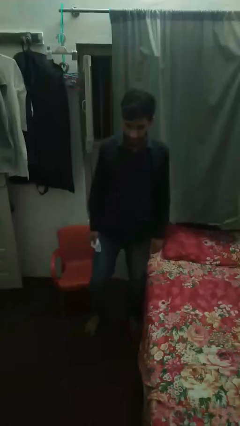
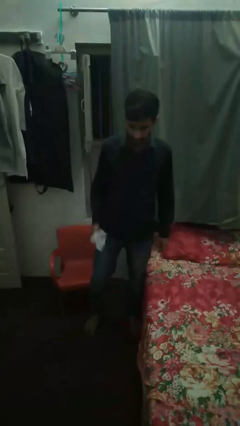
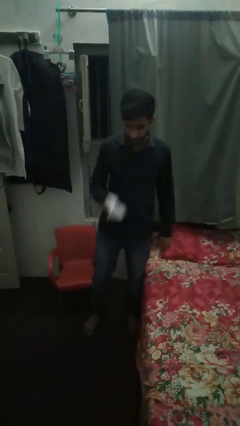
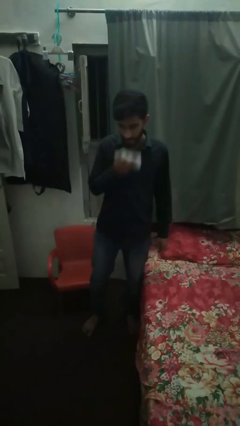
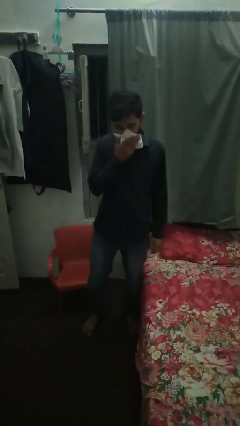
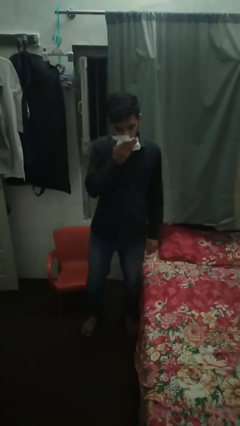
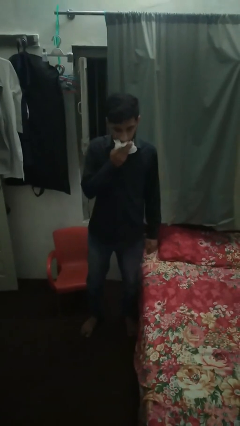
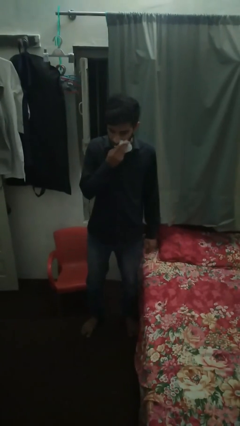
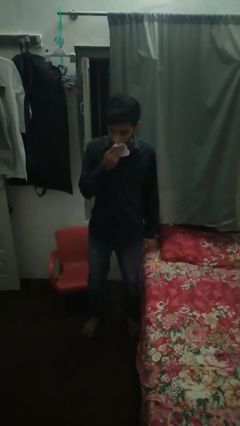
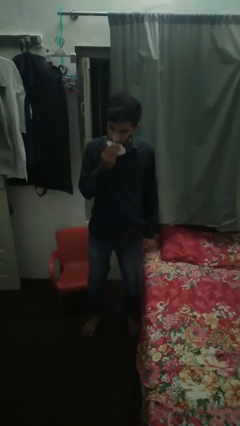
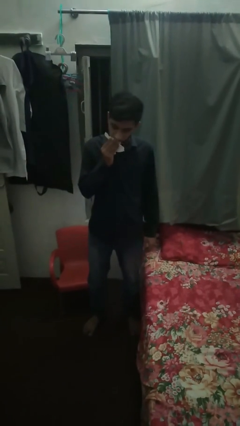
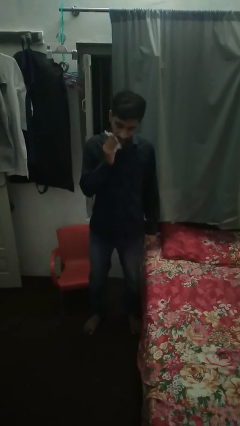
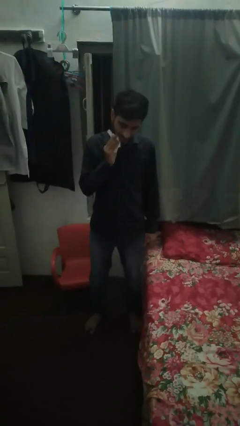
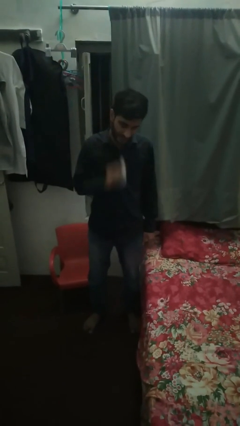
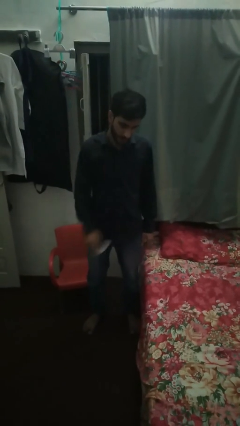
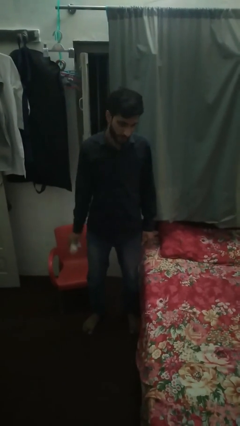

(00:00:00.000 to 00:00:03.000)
person wipes mouth with napkin

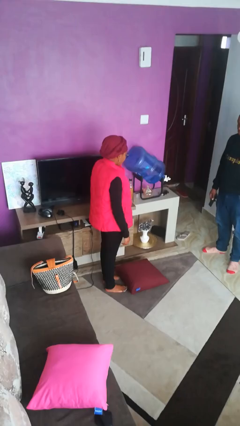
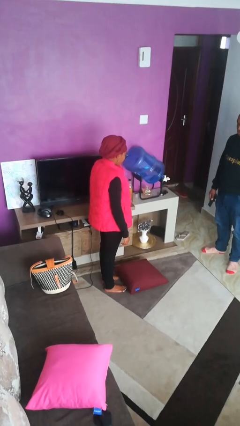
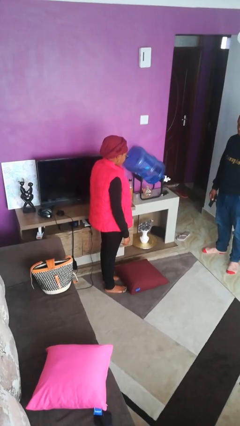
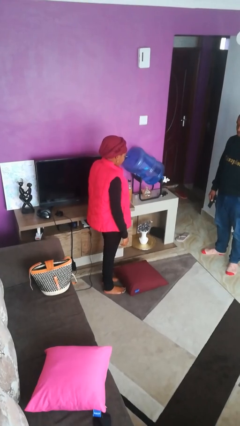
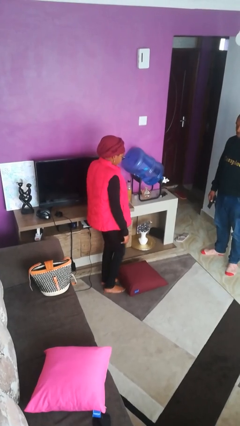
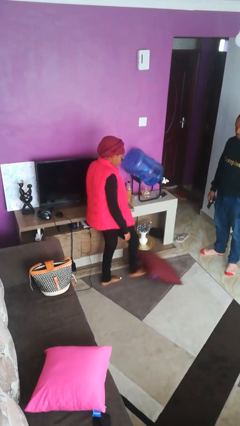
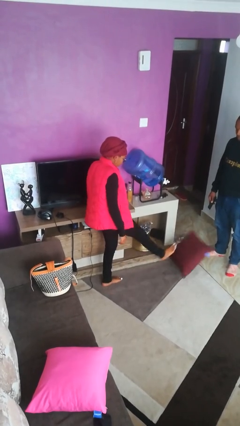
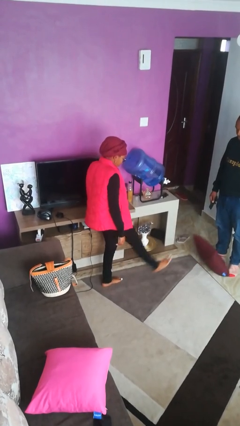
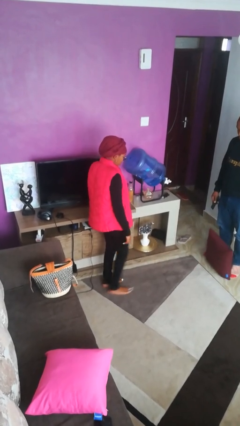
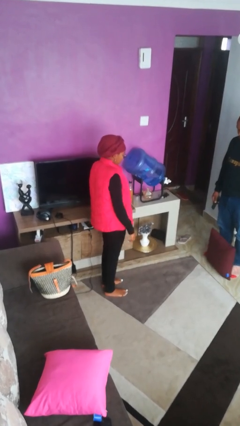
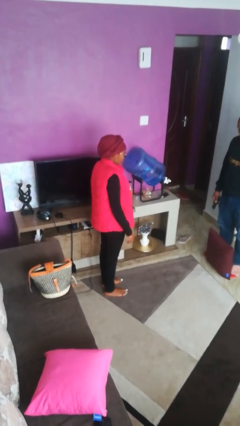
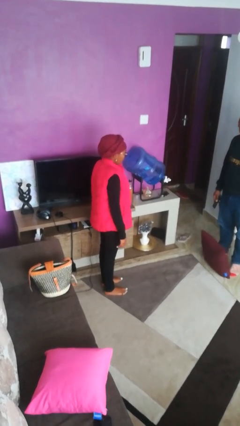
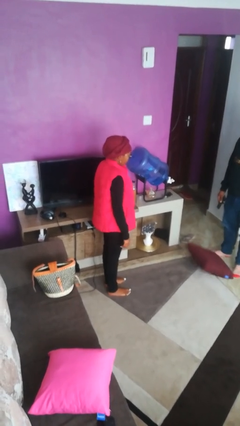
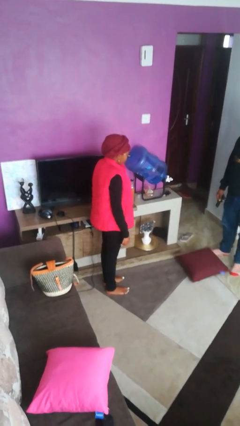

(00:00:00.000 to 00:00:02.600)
person kicks object to person

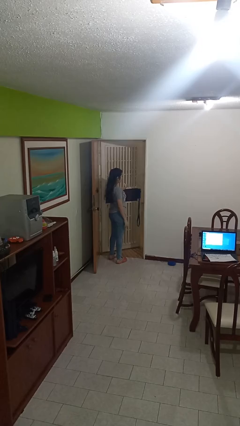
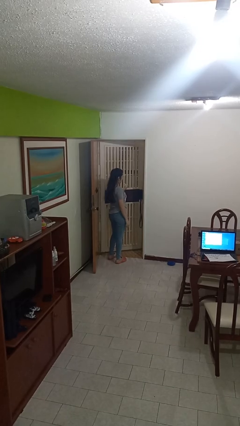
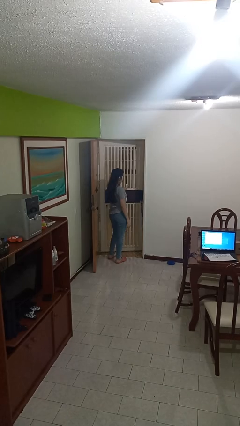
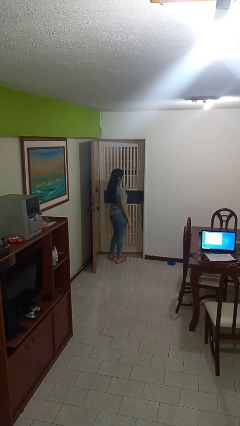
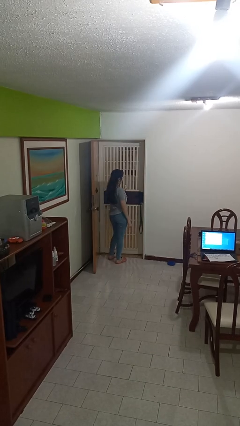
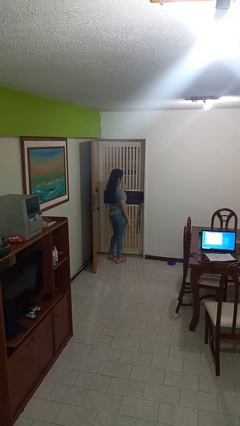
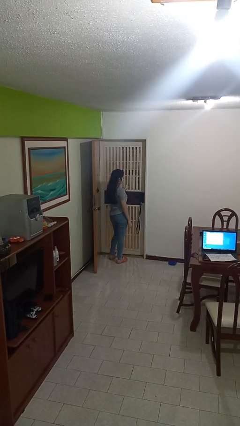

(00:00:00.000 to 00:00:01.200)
person closes facility door

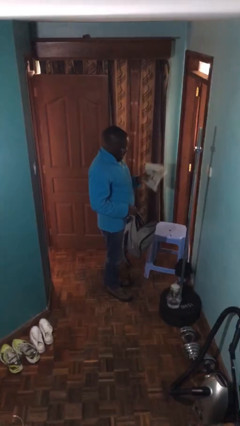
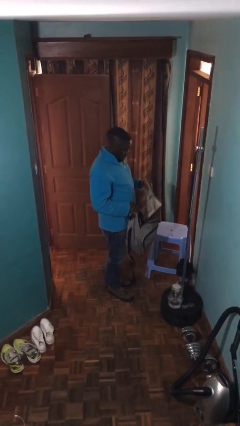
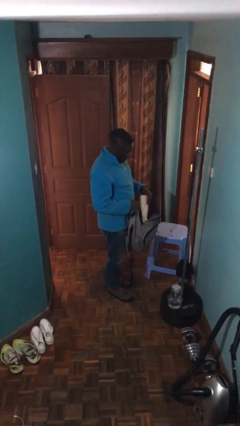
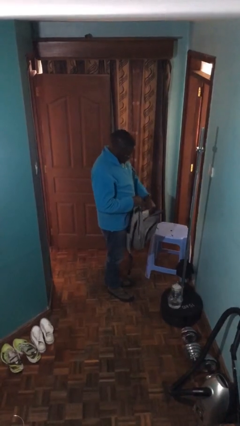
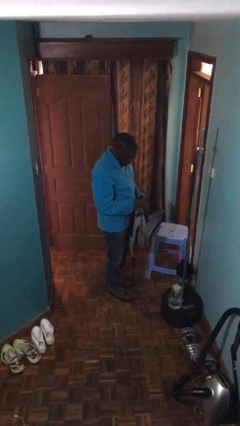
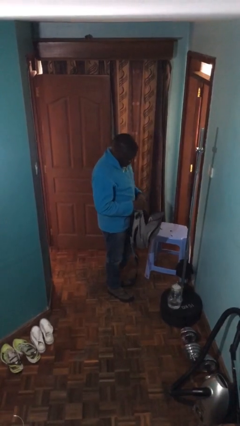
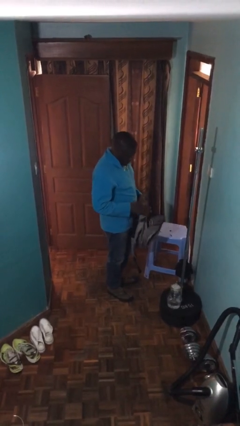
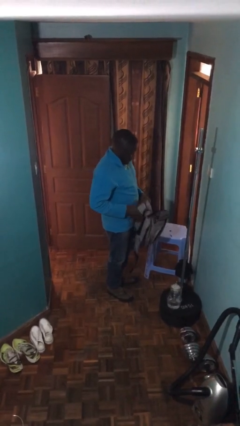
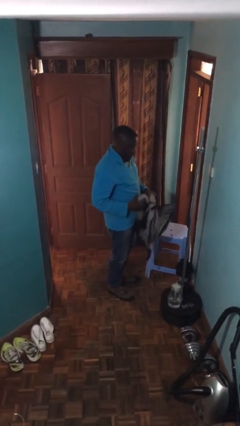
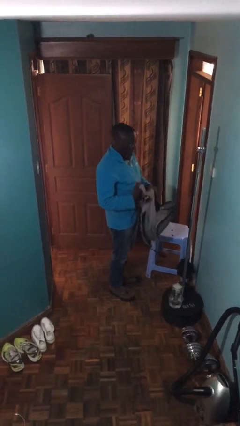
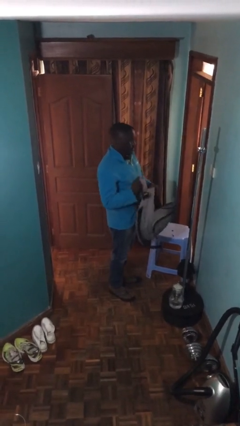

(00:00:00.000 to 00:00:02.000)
person puts object into backpack

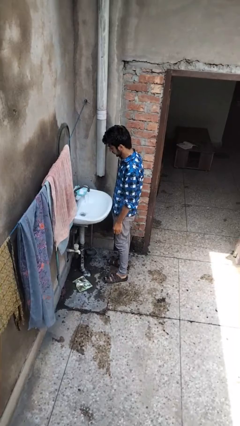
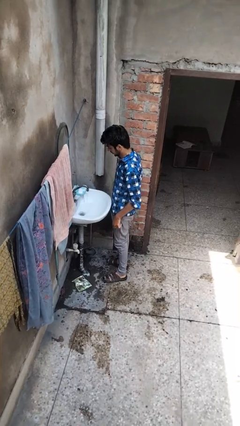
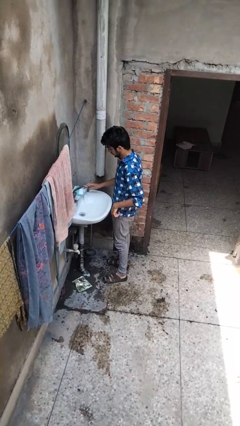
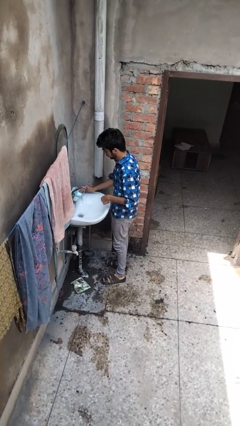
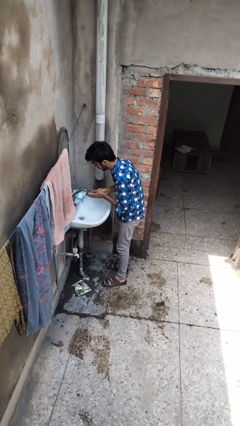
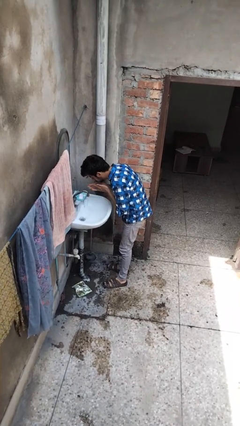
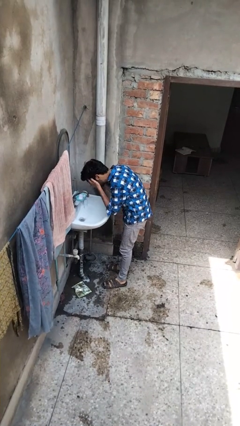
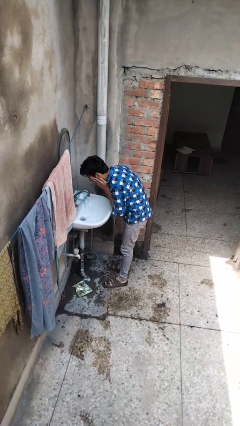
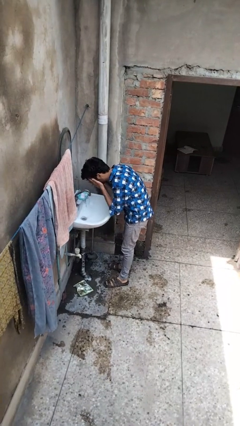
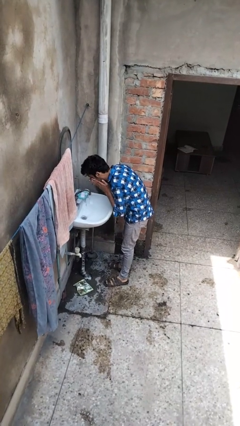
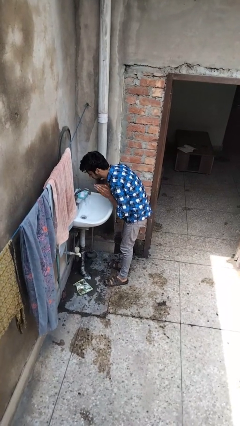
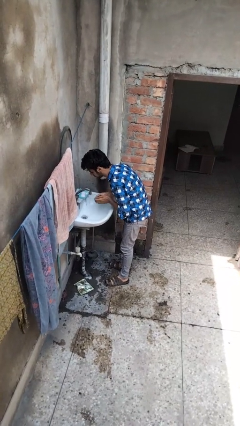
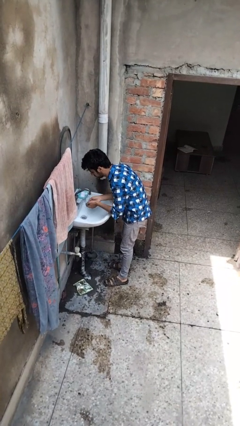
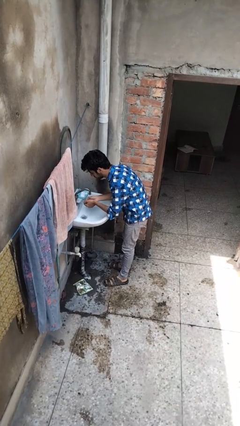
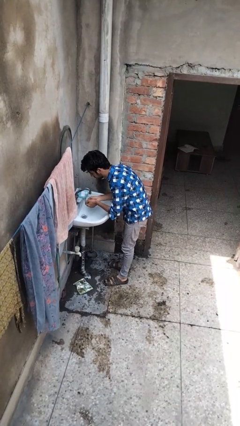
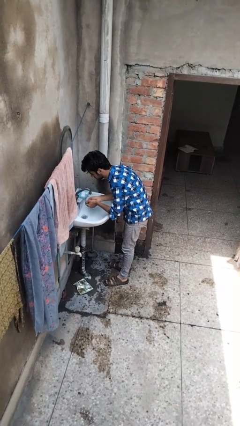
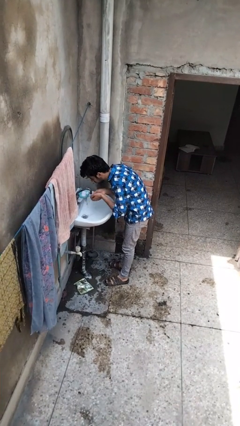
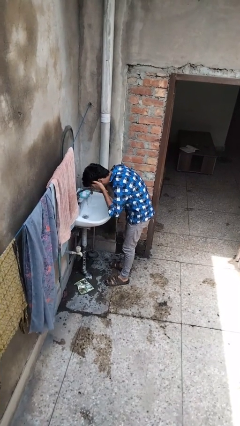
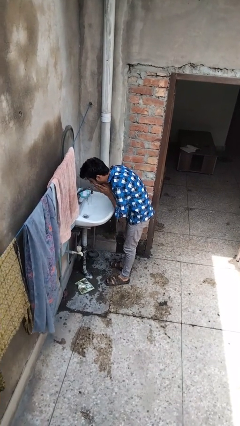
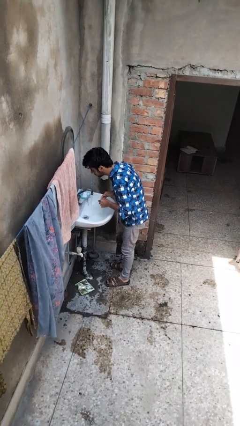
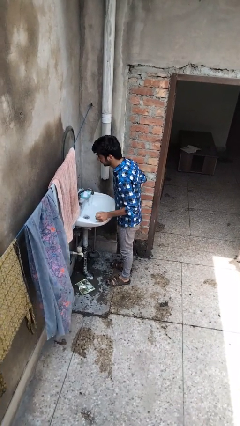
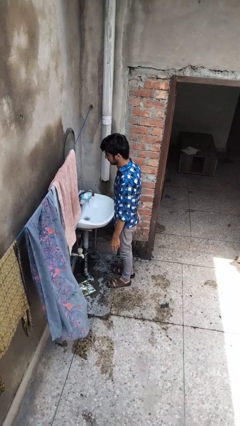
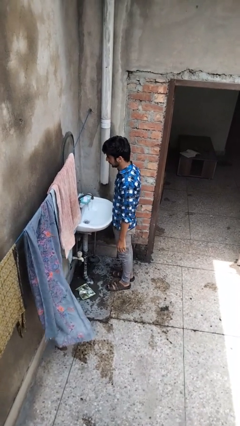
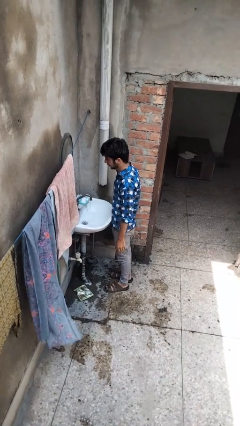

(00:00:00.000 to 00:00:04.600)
person washes face

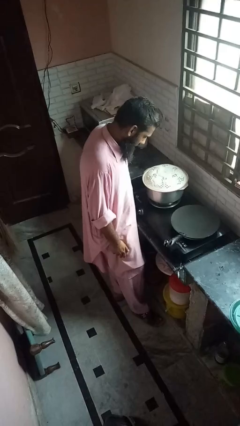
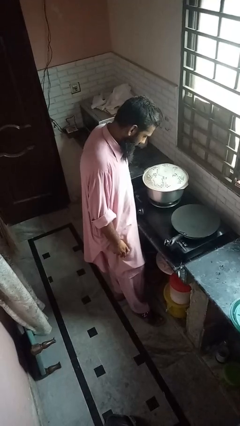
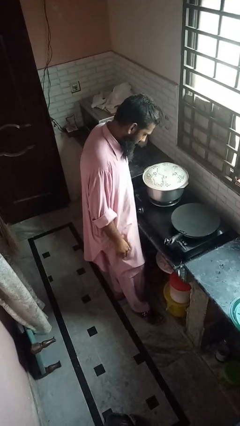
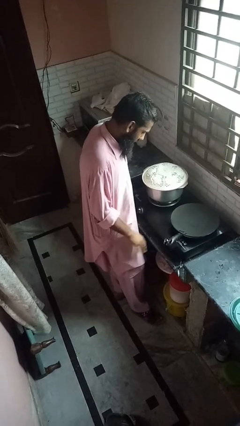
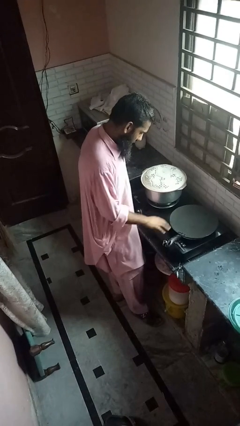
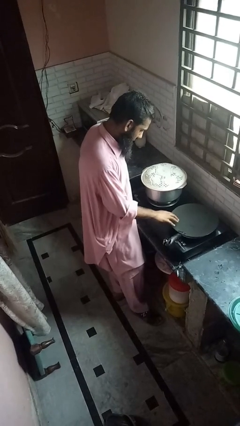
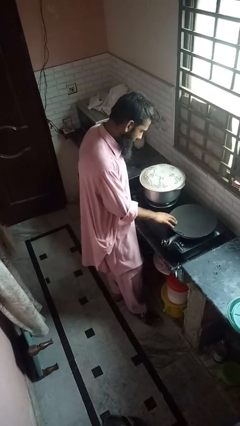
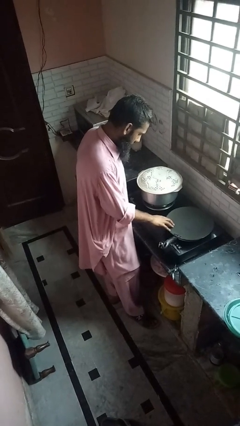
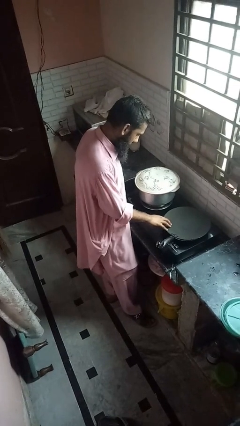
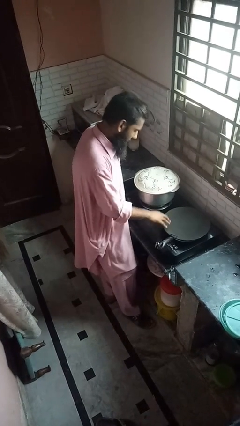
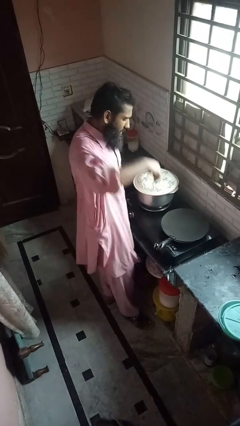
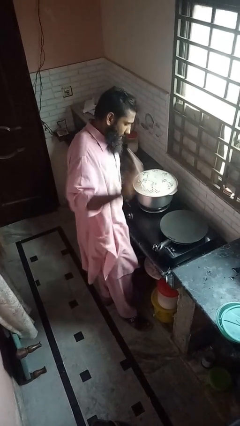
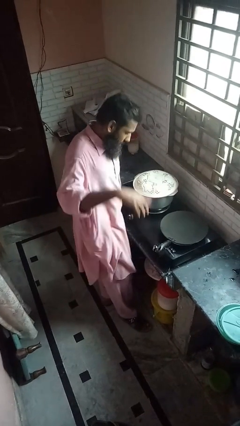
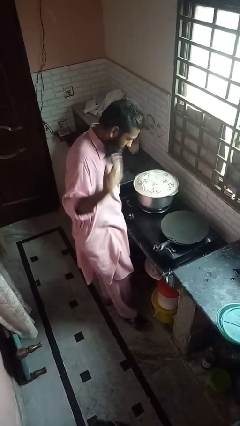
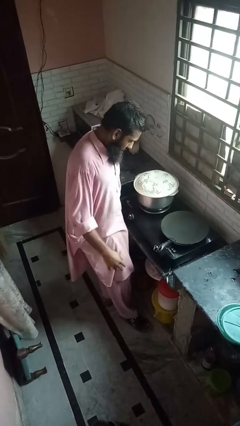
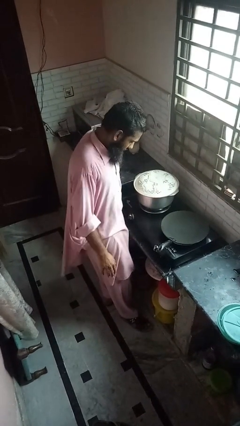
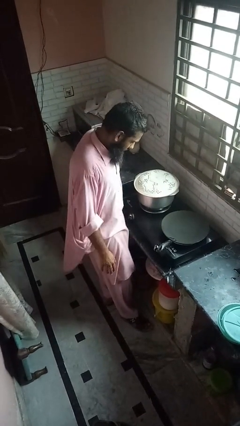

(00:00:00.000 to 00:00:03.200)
person burns hand

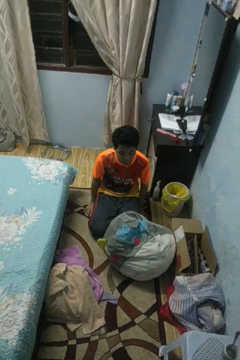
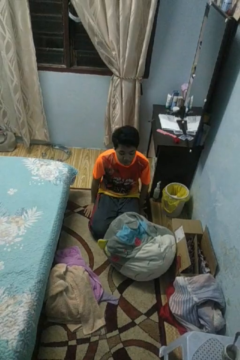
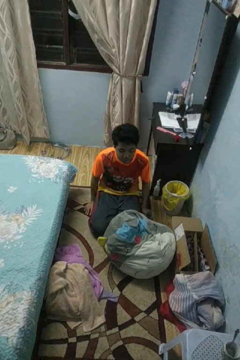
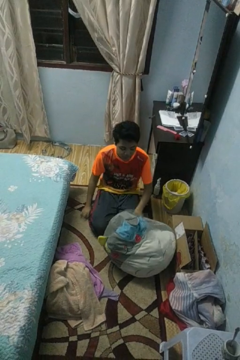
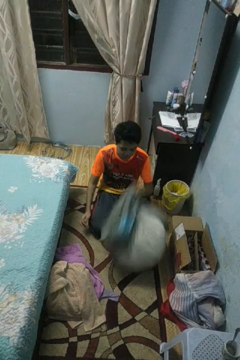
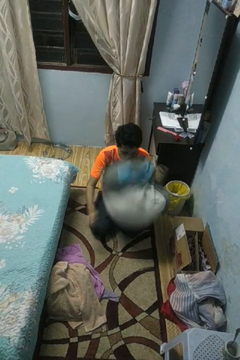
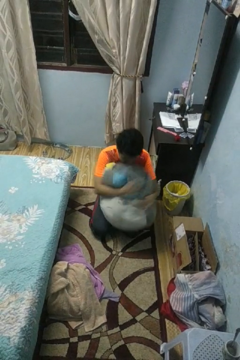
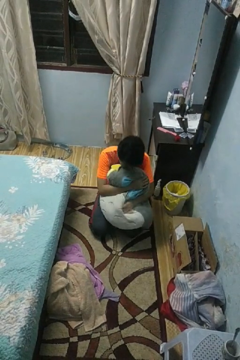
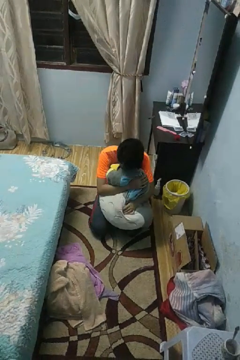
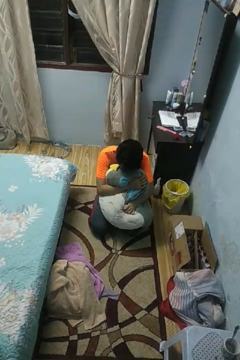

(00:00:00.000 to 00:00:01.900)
person hugs stuffed animal
